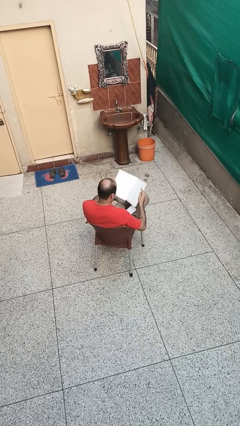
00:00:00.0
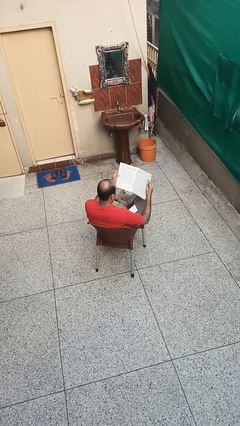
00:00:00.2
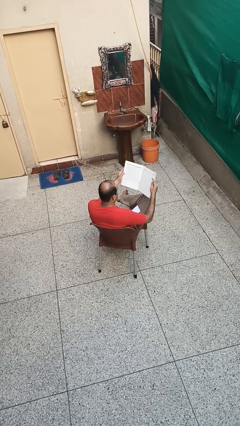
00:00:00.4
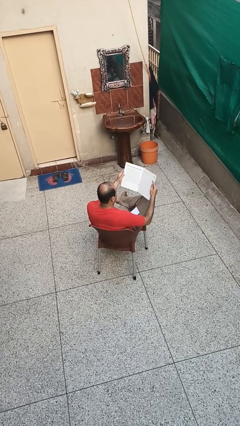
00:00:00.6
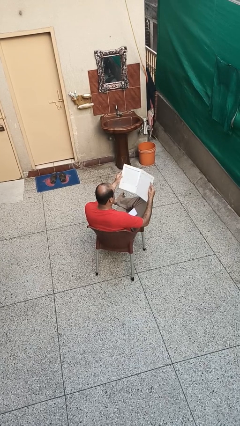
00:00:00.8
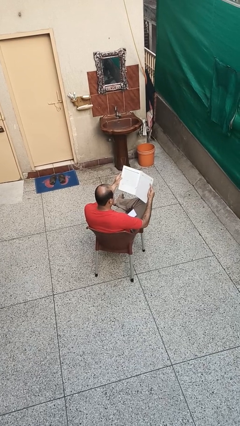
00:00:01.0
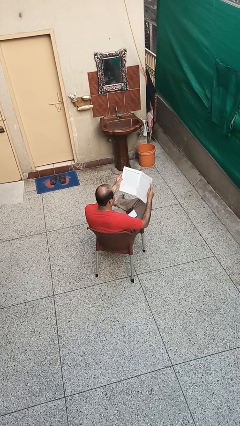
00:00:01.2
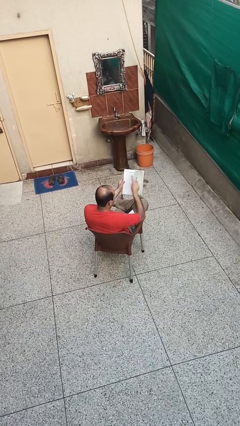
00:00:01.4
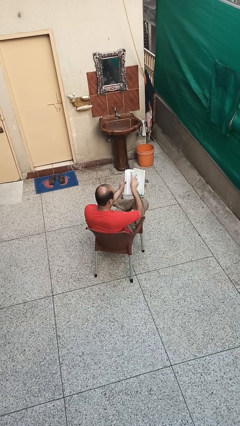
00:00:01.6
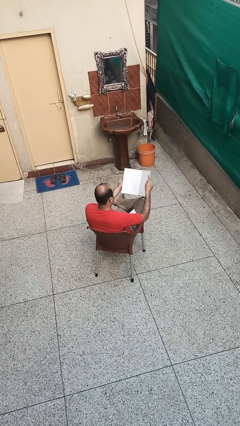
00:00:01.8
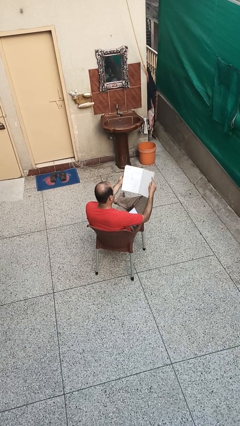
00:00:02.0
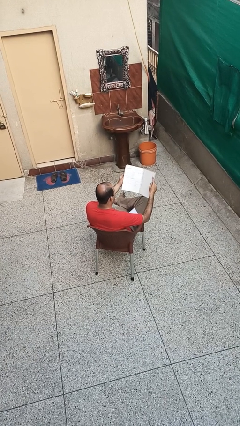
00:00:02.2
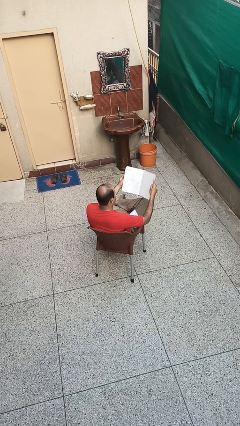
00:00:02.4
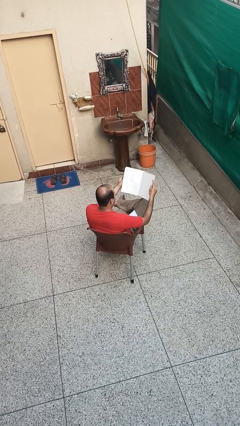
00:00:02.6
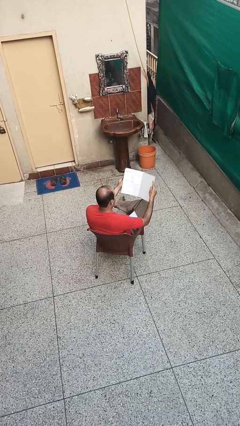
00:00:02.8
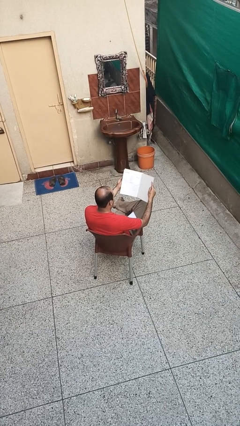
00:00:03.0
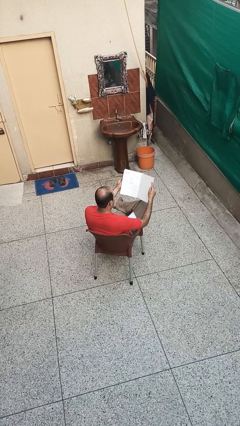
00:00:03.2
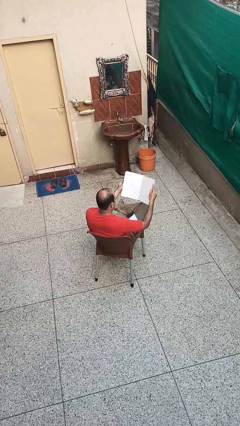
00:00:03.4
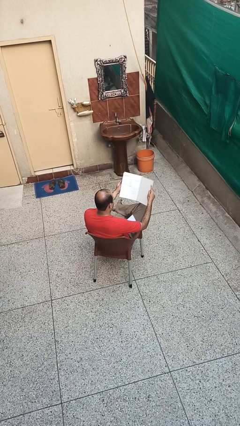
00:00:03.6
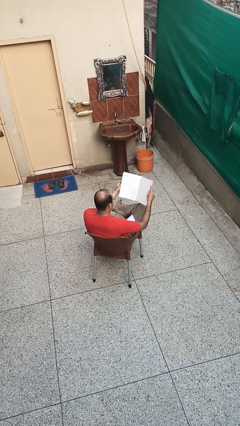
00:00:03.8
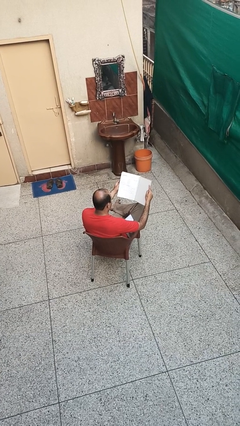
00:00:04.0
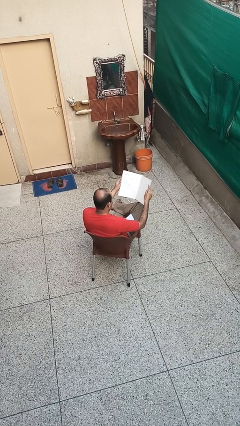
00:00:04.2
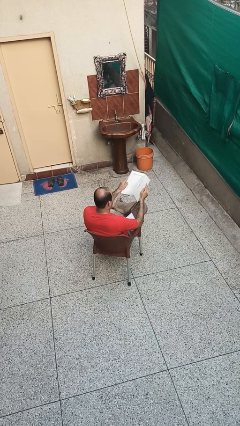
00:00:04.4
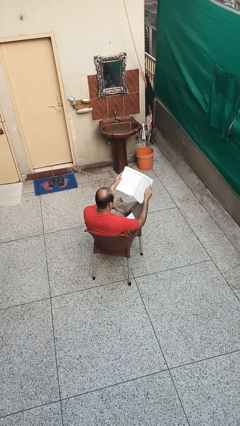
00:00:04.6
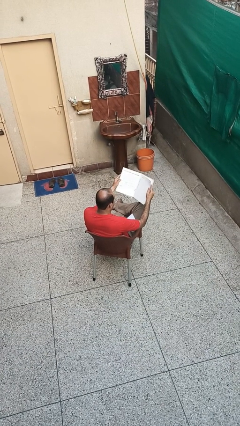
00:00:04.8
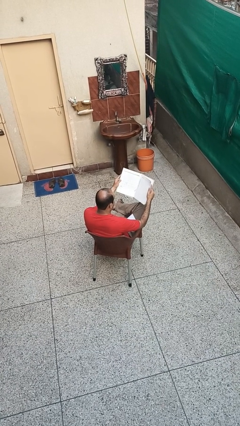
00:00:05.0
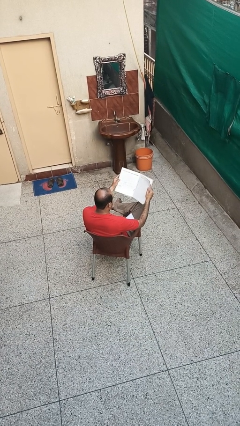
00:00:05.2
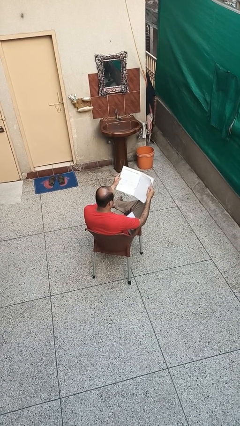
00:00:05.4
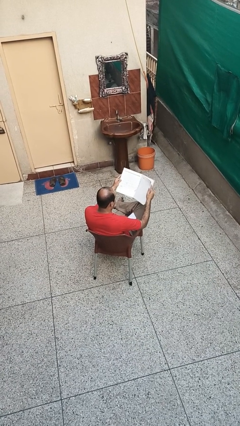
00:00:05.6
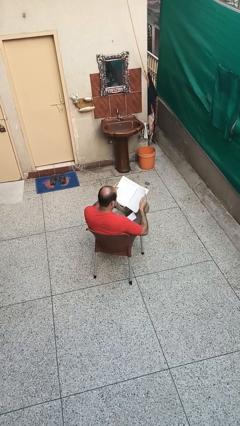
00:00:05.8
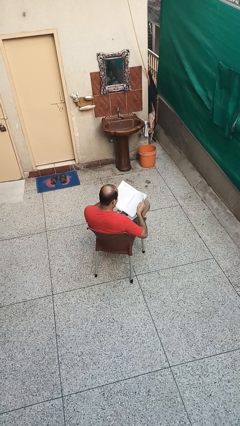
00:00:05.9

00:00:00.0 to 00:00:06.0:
person reads book

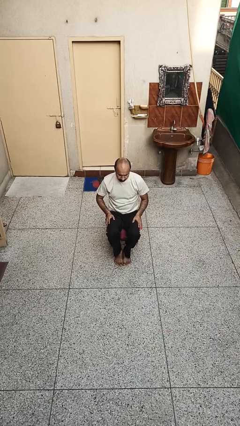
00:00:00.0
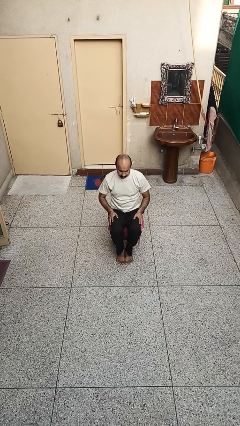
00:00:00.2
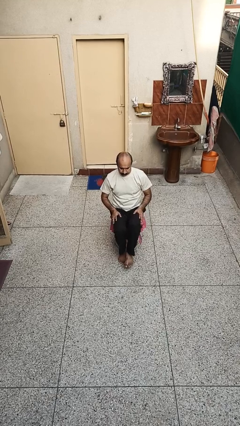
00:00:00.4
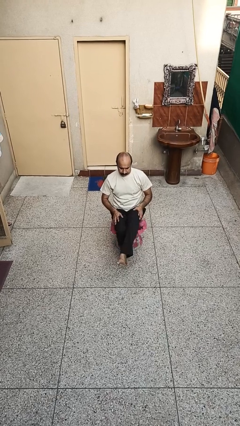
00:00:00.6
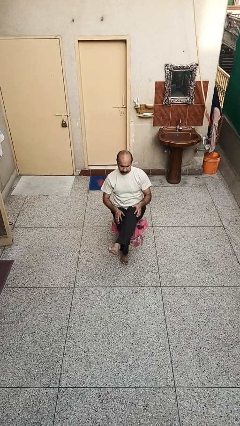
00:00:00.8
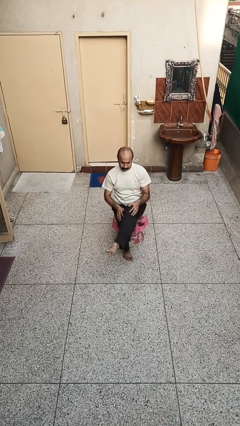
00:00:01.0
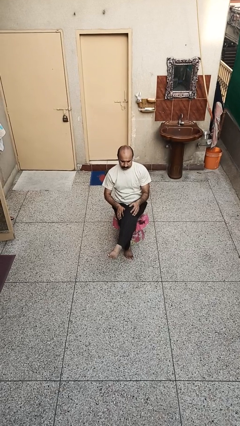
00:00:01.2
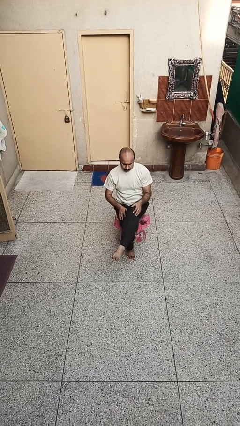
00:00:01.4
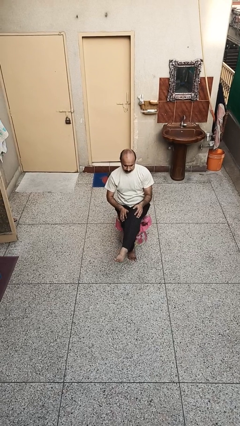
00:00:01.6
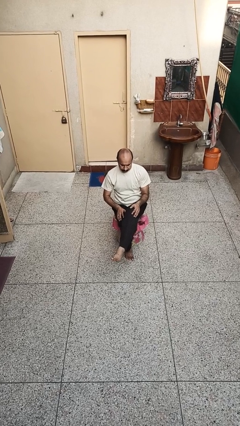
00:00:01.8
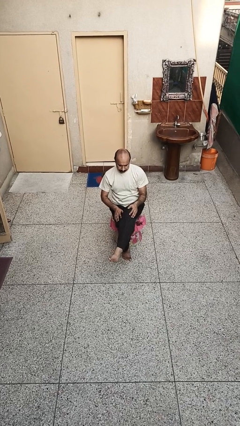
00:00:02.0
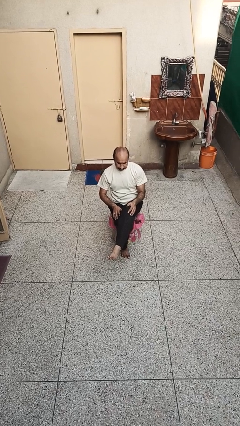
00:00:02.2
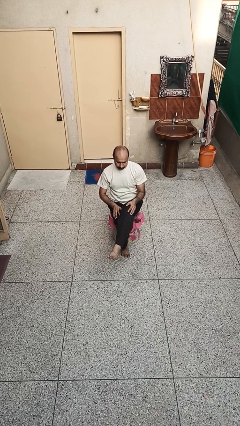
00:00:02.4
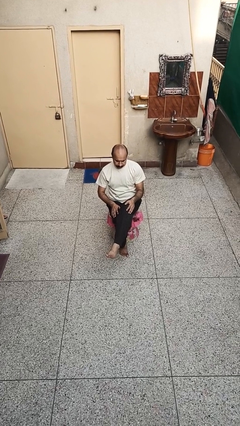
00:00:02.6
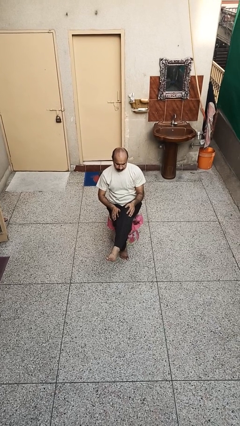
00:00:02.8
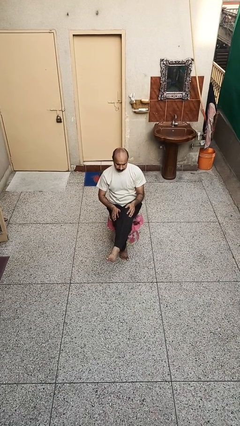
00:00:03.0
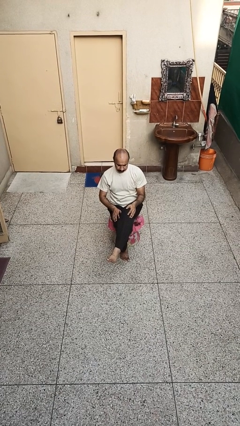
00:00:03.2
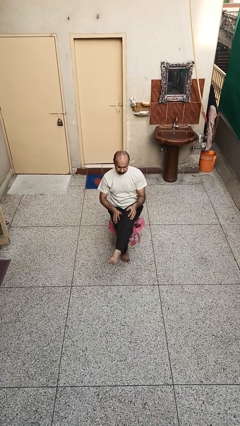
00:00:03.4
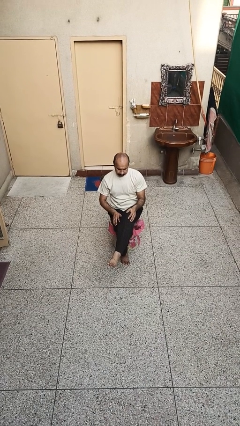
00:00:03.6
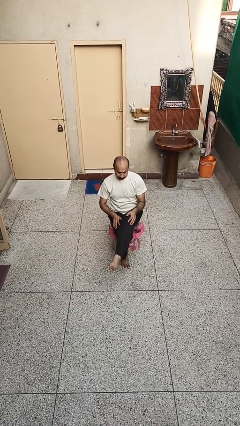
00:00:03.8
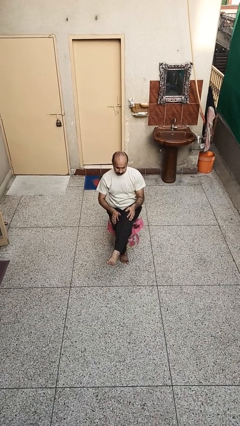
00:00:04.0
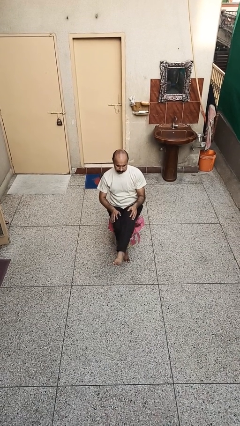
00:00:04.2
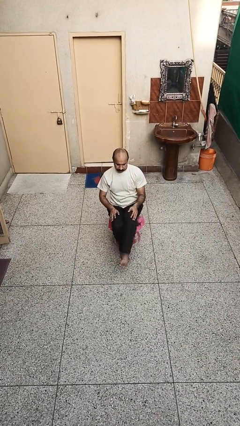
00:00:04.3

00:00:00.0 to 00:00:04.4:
person crosses legs

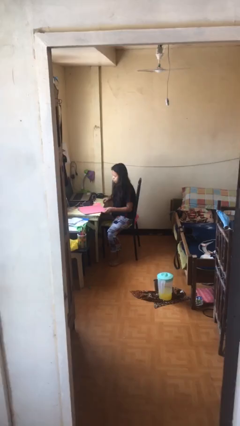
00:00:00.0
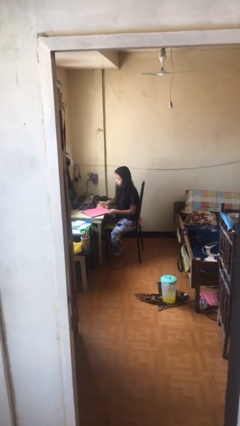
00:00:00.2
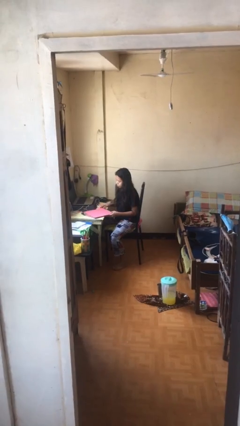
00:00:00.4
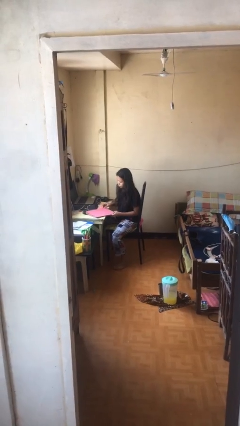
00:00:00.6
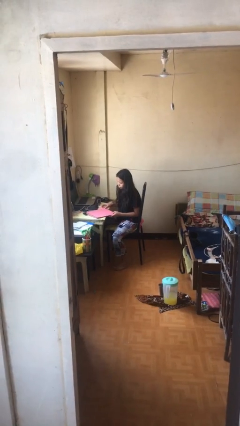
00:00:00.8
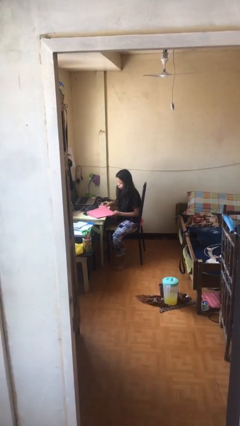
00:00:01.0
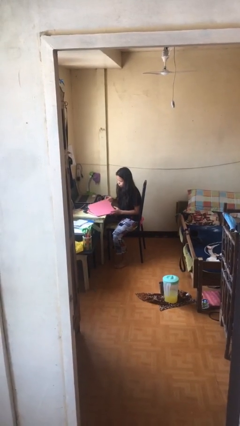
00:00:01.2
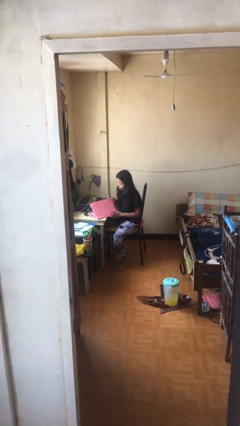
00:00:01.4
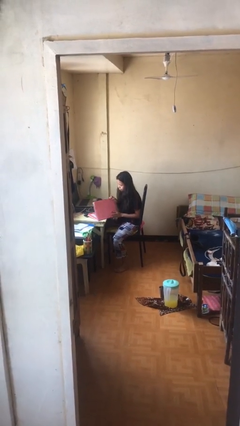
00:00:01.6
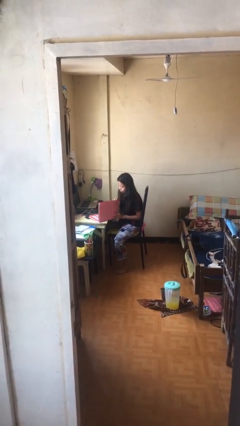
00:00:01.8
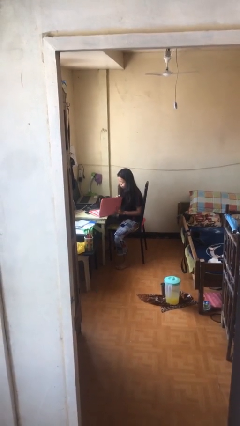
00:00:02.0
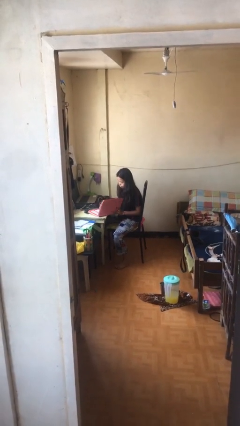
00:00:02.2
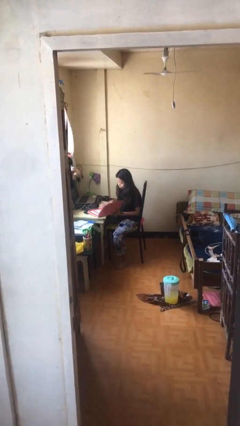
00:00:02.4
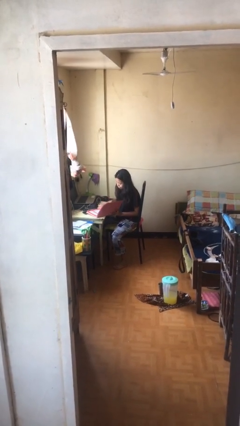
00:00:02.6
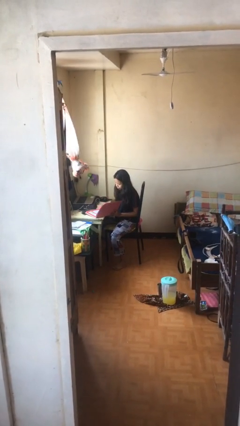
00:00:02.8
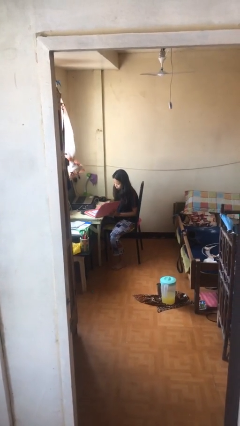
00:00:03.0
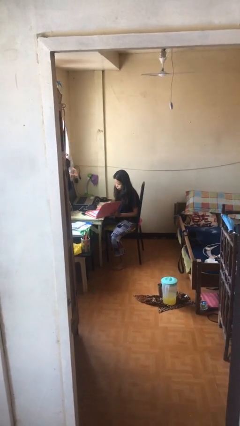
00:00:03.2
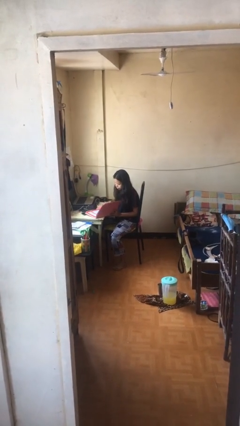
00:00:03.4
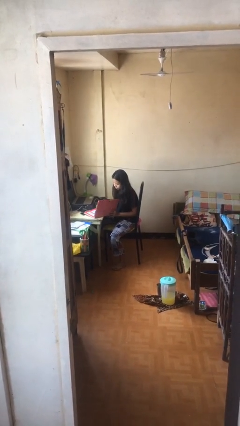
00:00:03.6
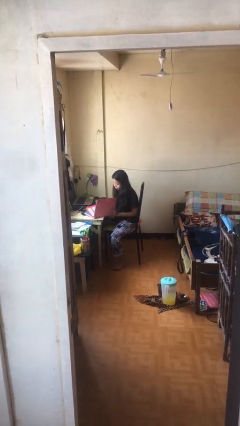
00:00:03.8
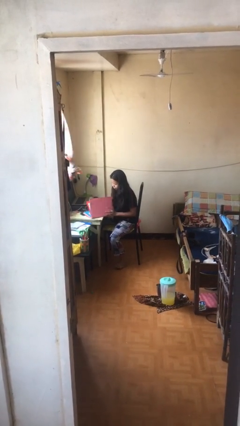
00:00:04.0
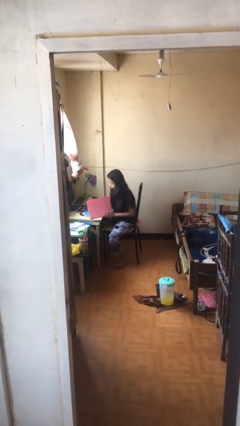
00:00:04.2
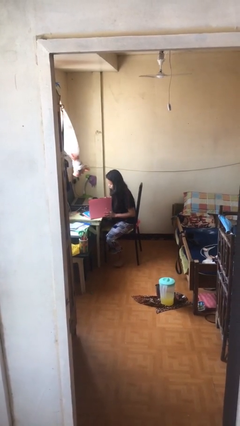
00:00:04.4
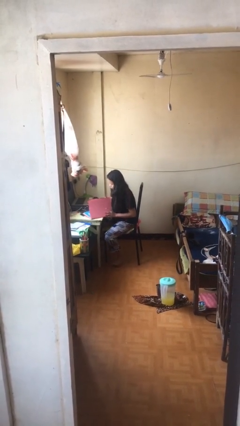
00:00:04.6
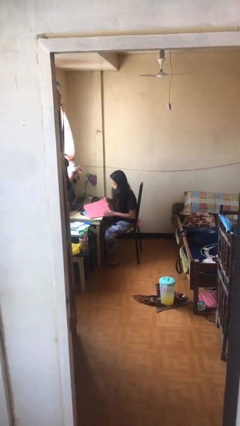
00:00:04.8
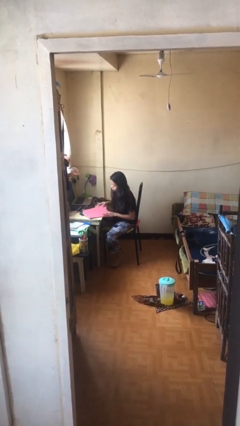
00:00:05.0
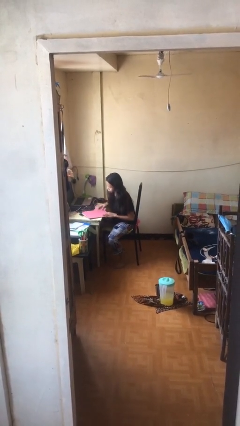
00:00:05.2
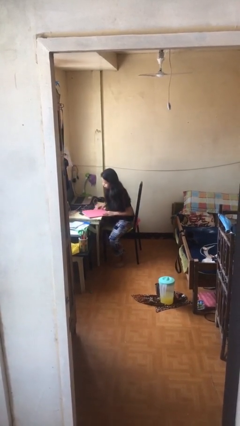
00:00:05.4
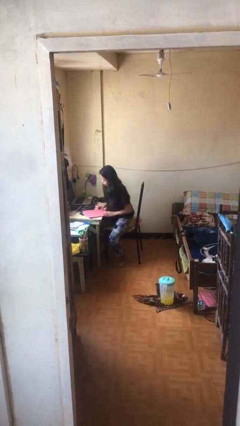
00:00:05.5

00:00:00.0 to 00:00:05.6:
person reads document

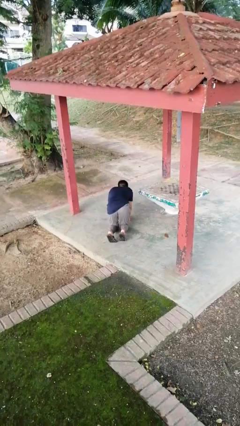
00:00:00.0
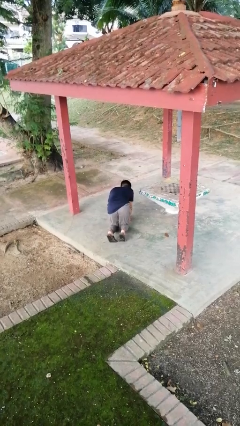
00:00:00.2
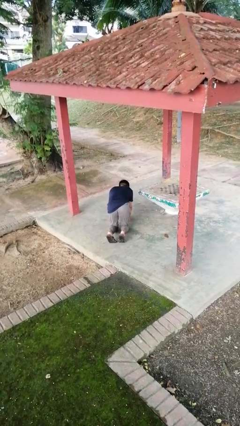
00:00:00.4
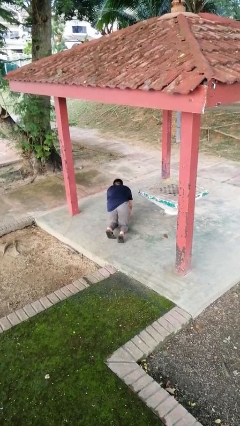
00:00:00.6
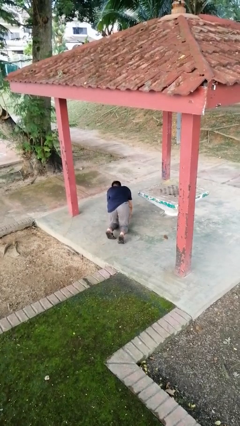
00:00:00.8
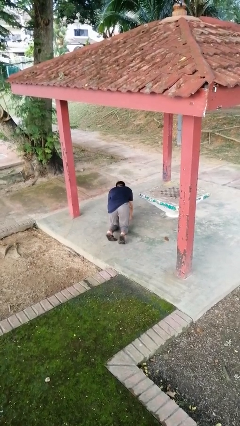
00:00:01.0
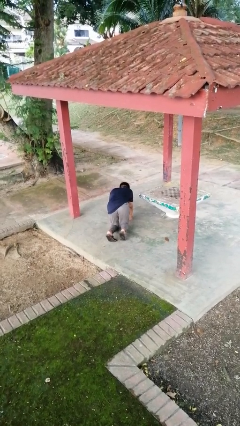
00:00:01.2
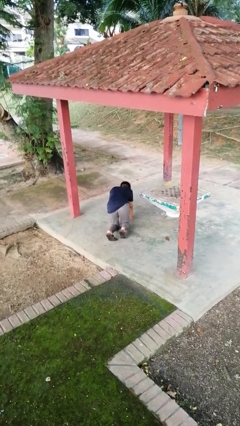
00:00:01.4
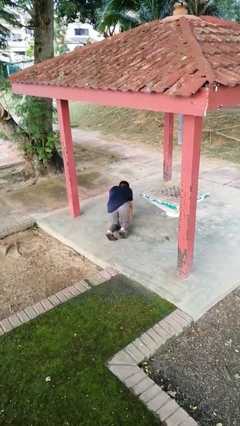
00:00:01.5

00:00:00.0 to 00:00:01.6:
person crawls

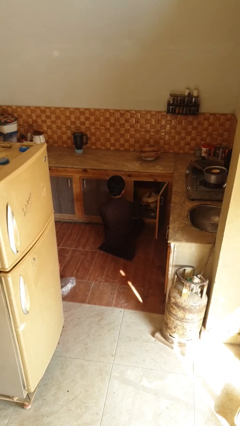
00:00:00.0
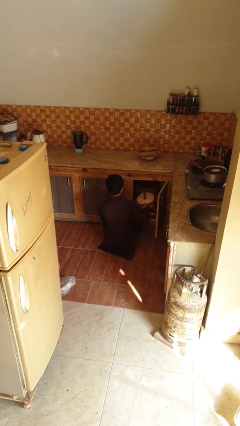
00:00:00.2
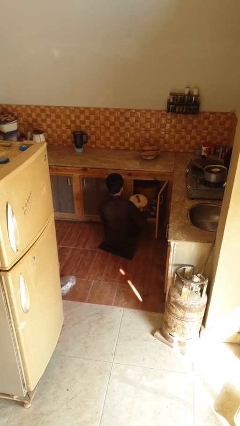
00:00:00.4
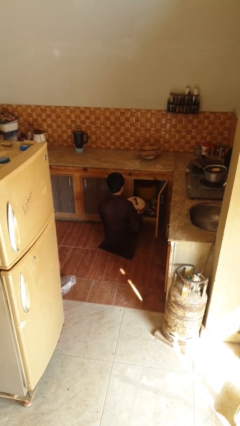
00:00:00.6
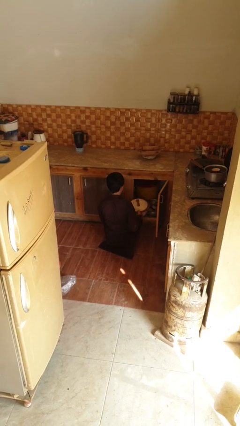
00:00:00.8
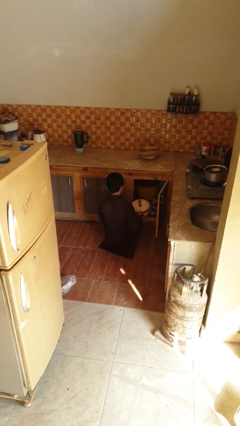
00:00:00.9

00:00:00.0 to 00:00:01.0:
person takes object from kitchen drawer
